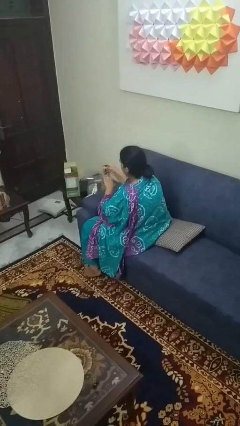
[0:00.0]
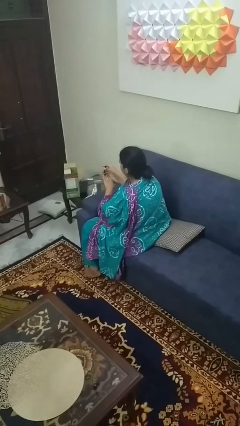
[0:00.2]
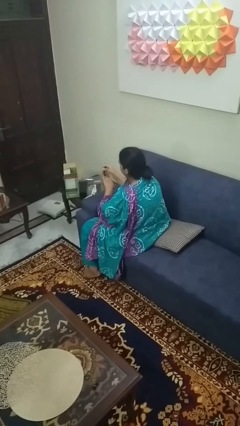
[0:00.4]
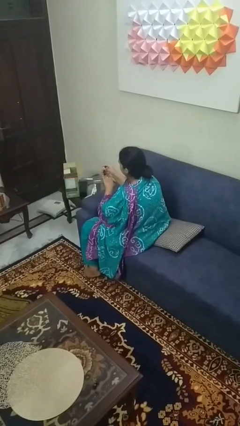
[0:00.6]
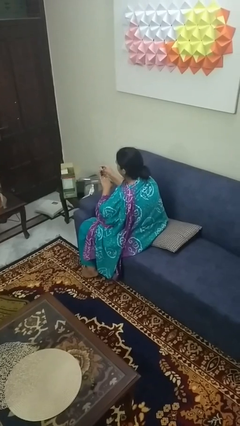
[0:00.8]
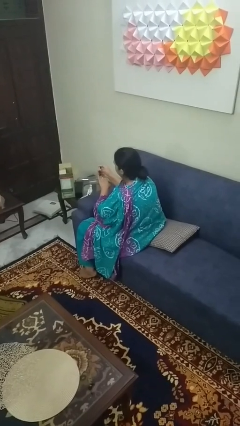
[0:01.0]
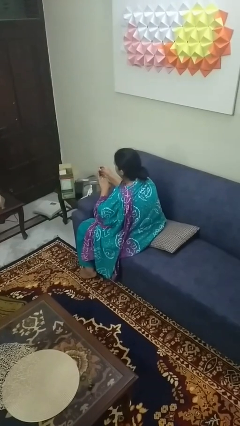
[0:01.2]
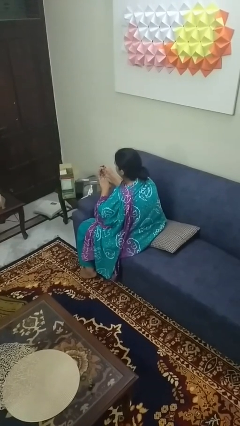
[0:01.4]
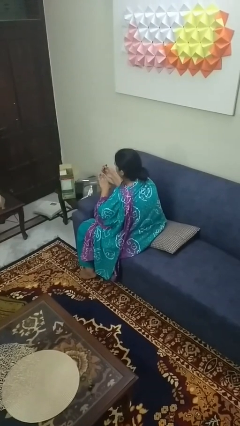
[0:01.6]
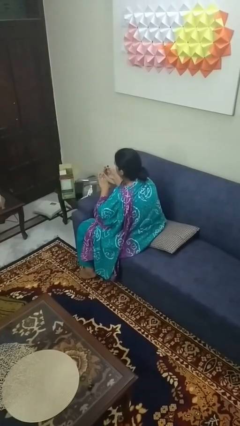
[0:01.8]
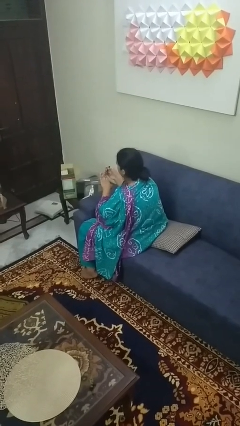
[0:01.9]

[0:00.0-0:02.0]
person clips fingernails

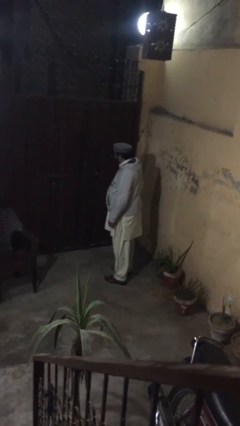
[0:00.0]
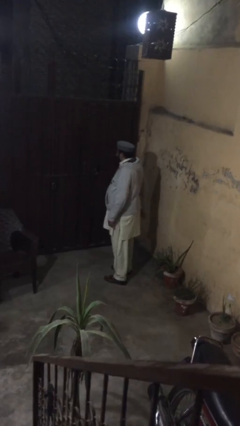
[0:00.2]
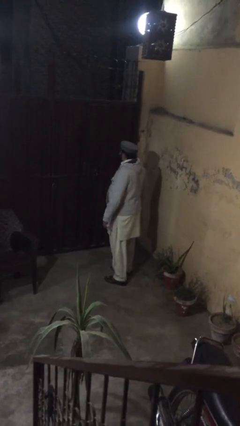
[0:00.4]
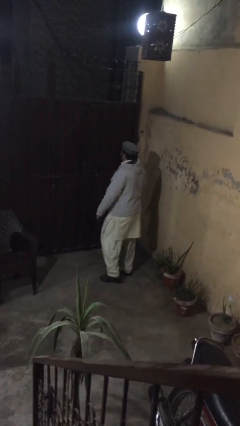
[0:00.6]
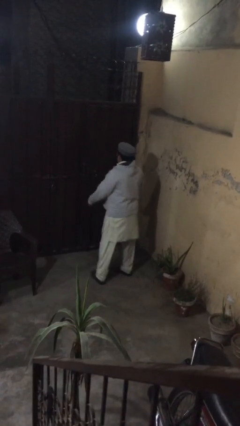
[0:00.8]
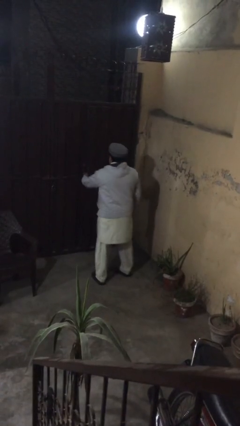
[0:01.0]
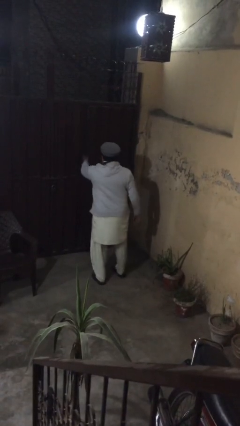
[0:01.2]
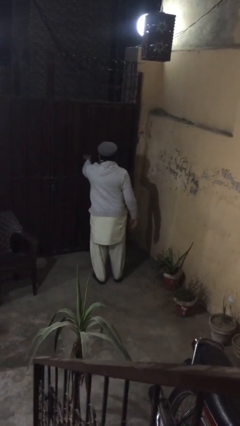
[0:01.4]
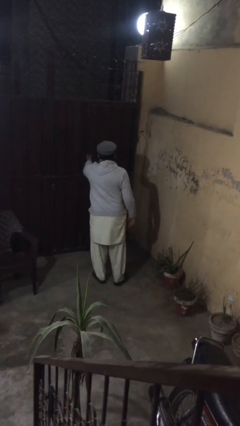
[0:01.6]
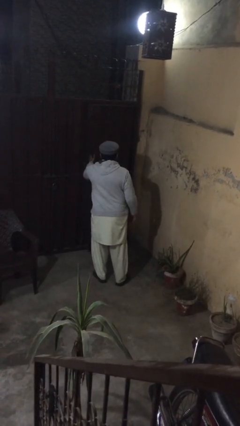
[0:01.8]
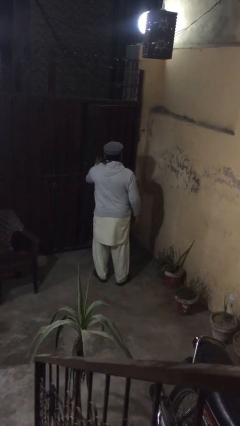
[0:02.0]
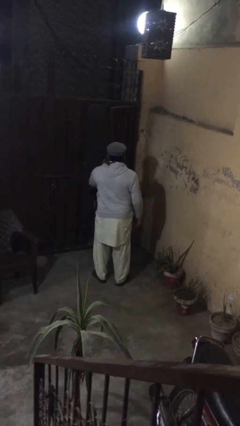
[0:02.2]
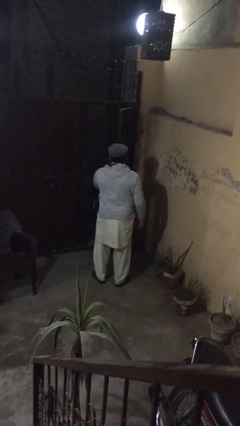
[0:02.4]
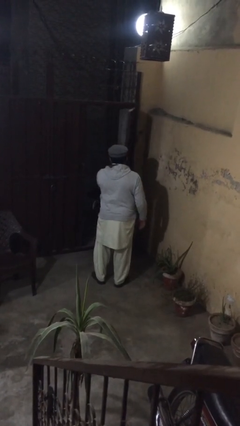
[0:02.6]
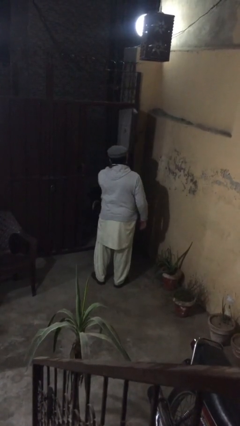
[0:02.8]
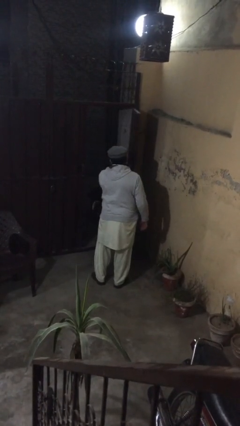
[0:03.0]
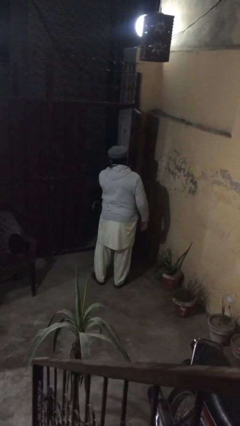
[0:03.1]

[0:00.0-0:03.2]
person opens facility door

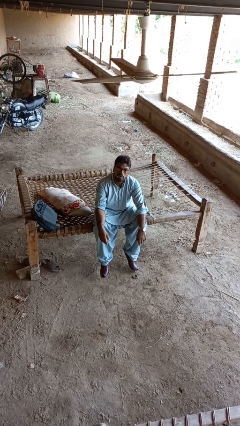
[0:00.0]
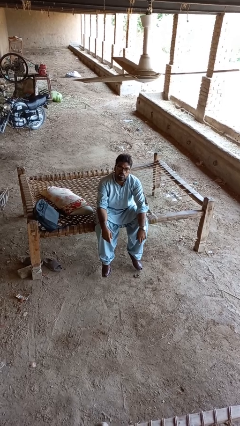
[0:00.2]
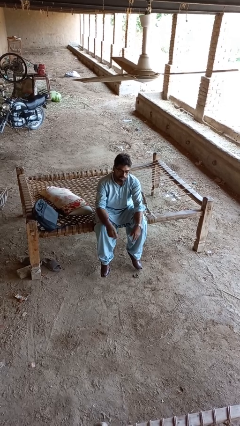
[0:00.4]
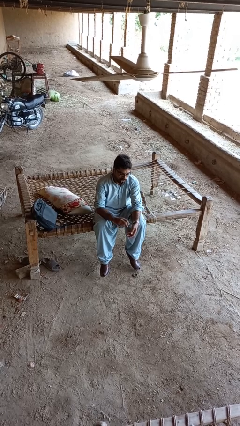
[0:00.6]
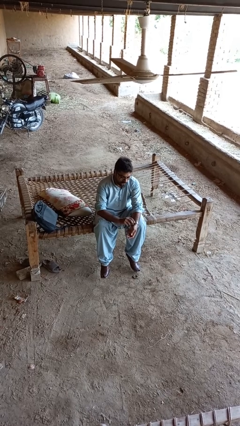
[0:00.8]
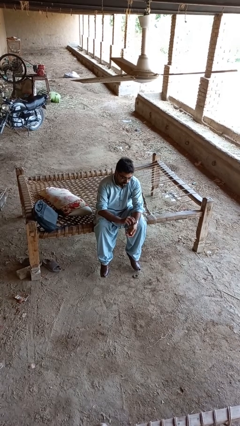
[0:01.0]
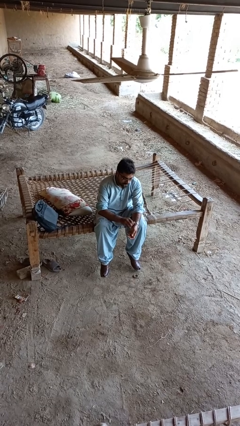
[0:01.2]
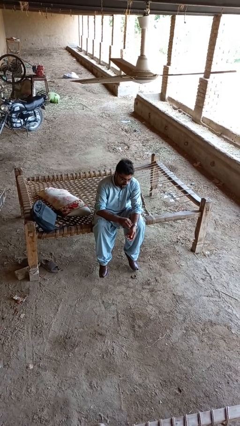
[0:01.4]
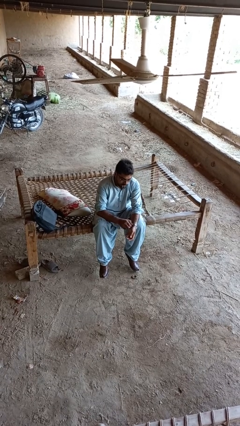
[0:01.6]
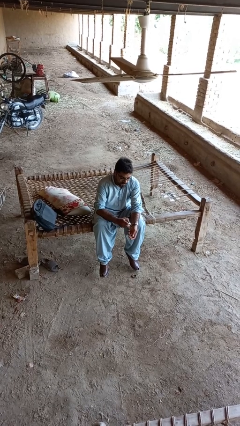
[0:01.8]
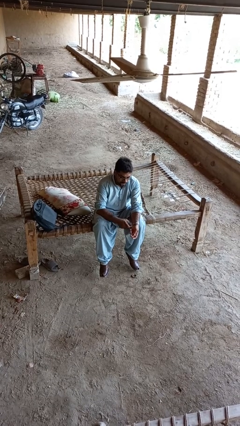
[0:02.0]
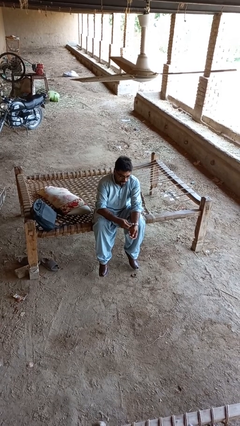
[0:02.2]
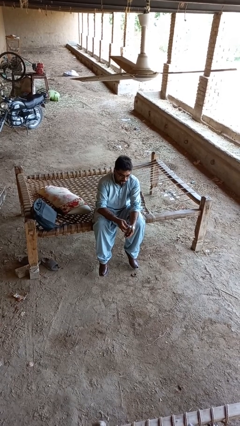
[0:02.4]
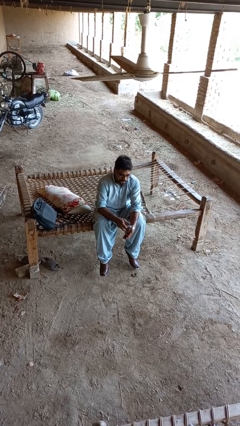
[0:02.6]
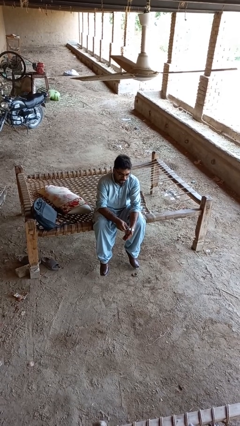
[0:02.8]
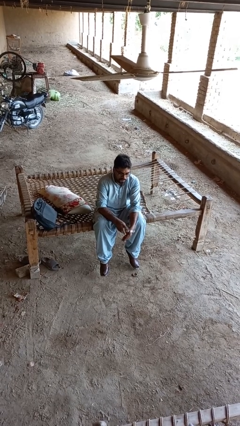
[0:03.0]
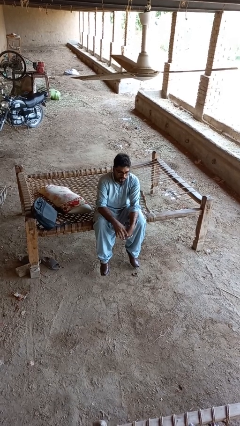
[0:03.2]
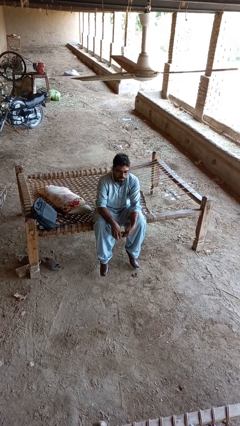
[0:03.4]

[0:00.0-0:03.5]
person takes off wristwatch

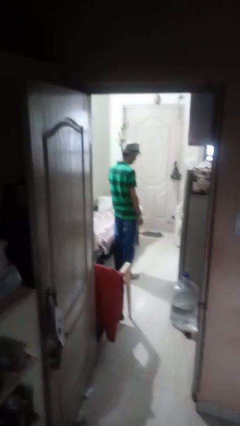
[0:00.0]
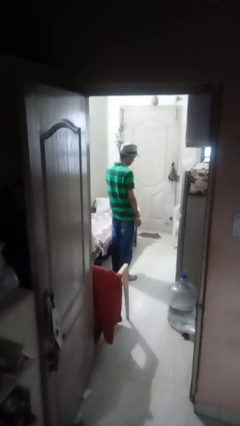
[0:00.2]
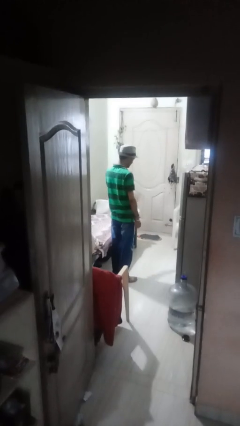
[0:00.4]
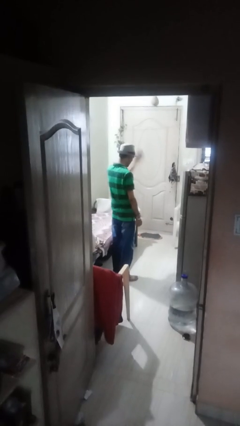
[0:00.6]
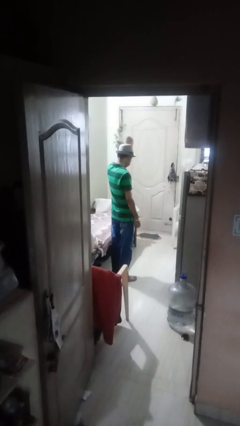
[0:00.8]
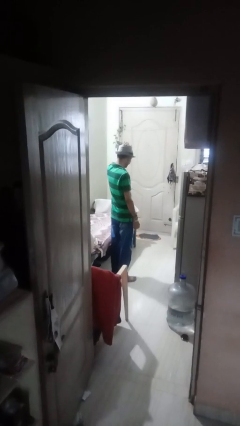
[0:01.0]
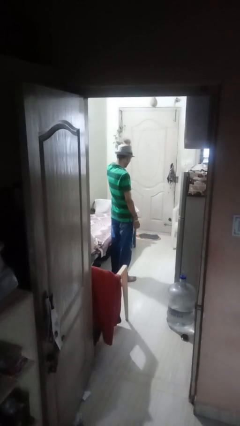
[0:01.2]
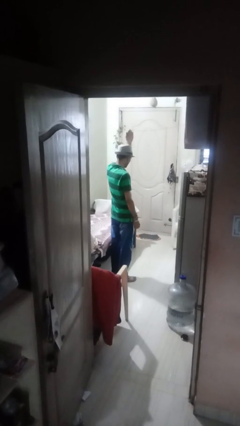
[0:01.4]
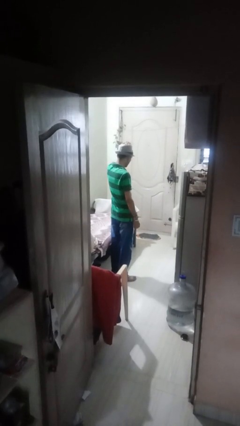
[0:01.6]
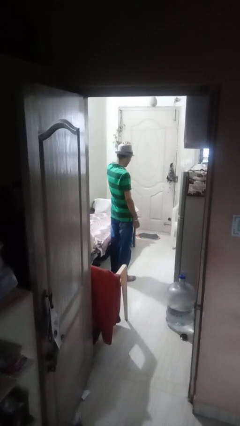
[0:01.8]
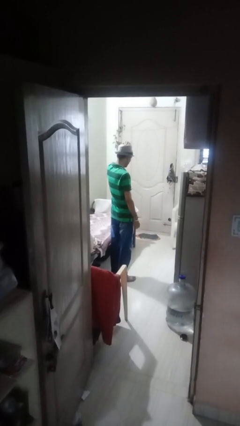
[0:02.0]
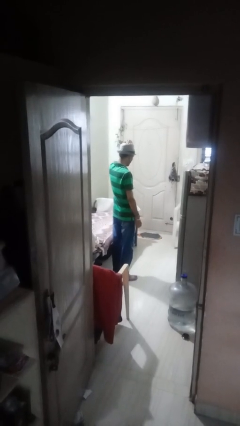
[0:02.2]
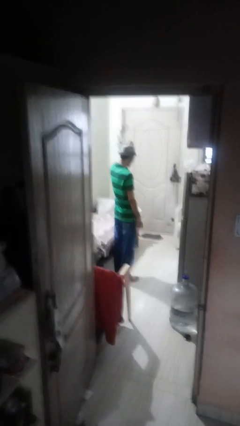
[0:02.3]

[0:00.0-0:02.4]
person pats head

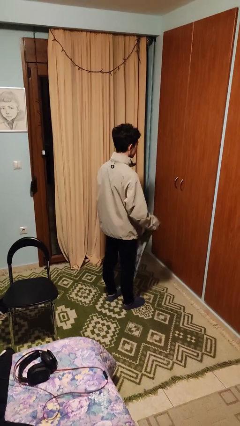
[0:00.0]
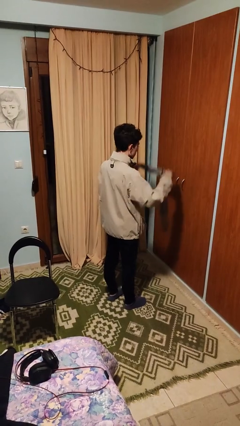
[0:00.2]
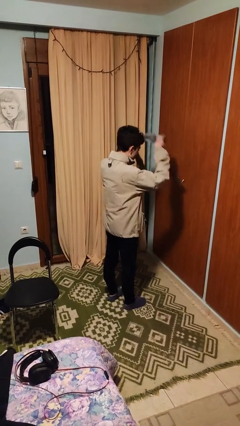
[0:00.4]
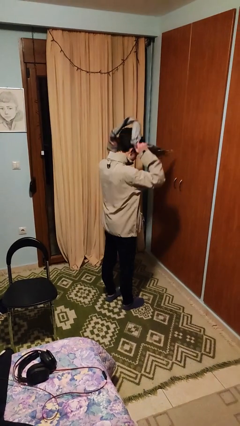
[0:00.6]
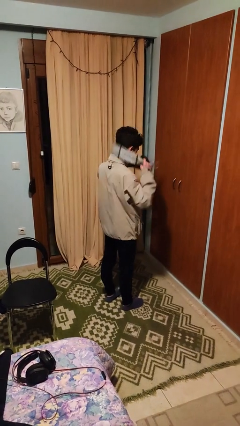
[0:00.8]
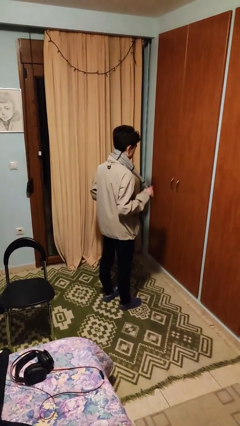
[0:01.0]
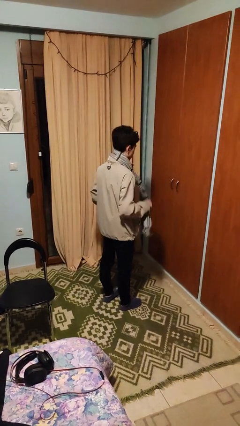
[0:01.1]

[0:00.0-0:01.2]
person puts on scarf

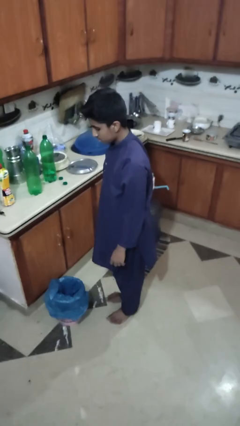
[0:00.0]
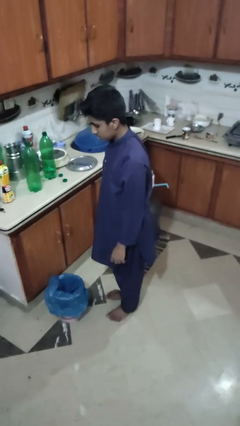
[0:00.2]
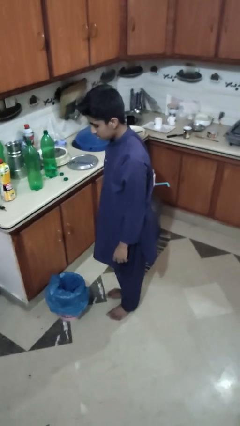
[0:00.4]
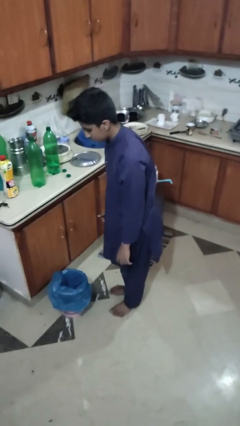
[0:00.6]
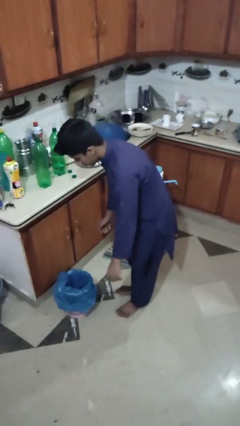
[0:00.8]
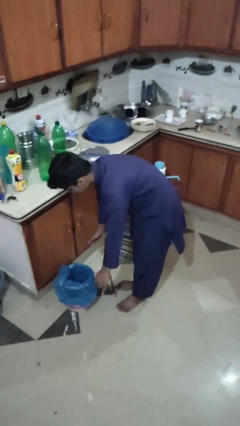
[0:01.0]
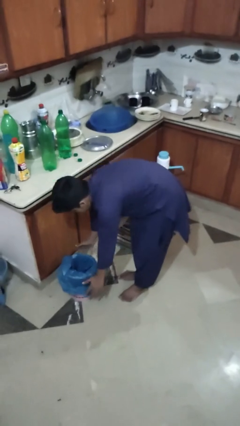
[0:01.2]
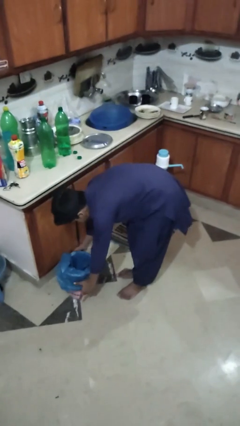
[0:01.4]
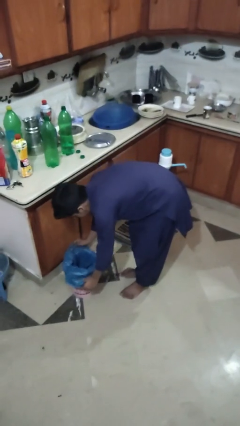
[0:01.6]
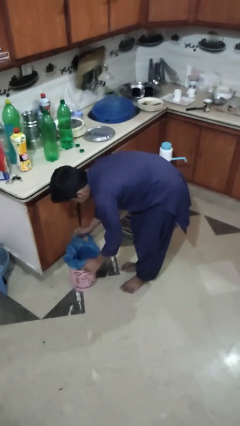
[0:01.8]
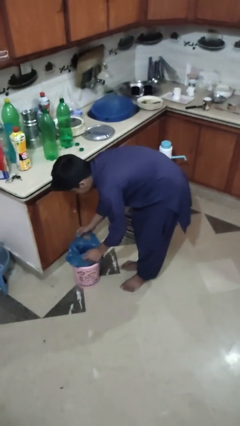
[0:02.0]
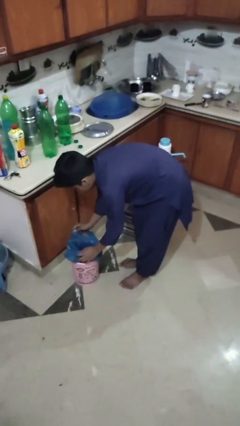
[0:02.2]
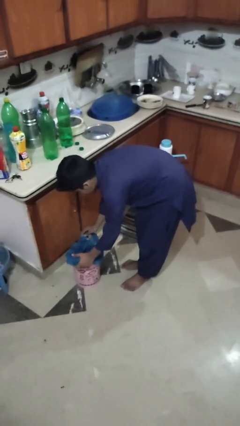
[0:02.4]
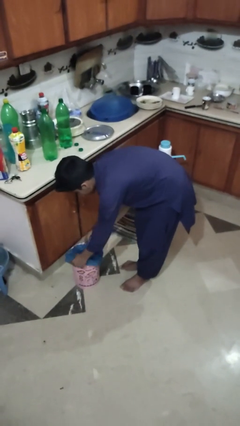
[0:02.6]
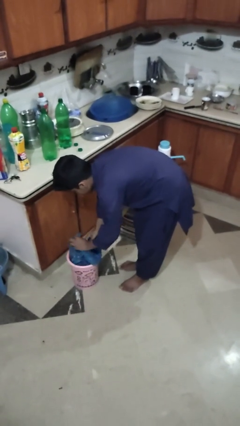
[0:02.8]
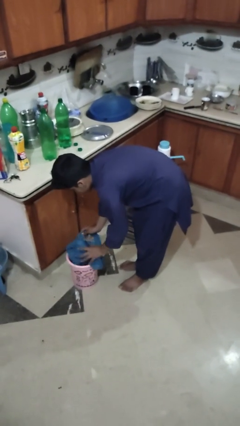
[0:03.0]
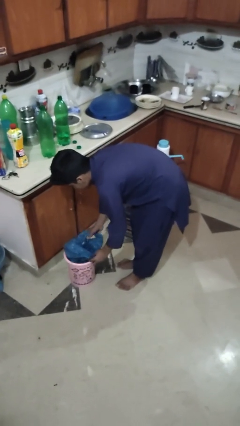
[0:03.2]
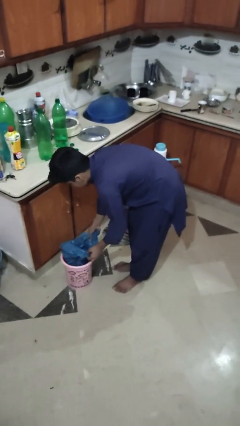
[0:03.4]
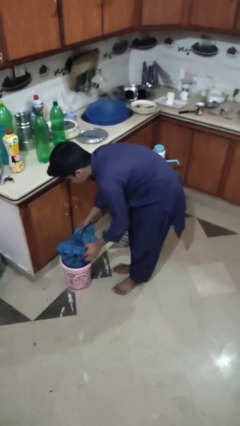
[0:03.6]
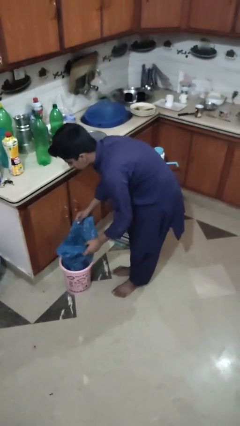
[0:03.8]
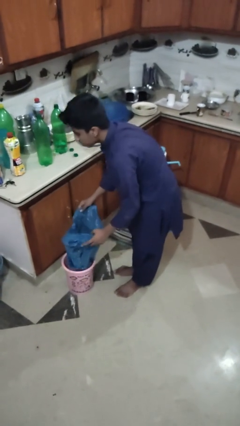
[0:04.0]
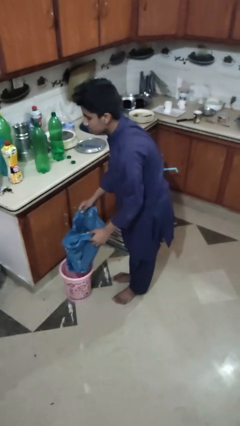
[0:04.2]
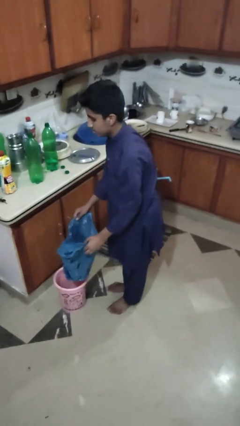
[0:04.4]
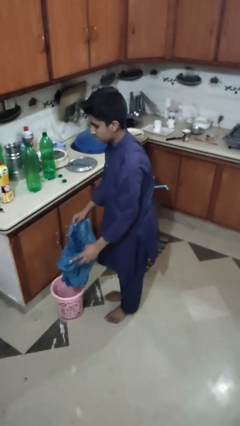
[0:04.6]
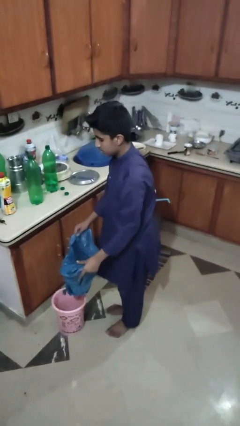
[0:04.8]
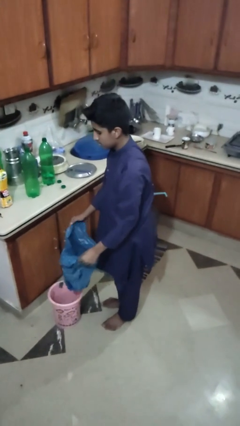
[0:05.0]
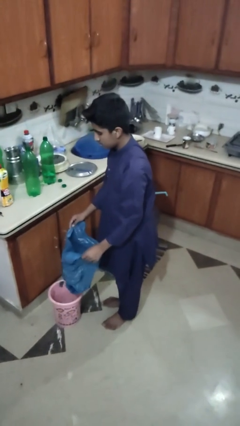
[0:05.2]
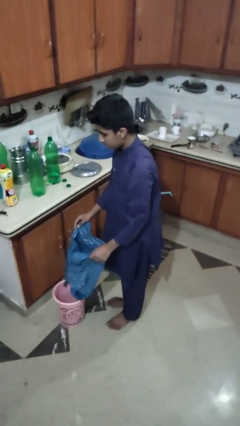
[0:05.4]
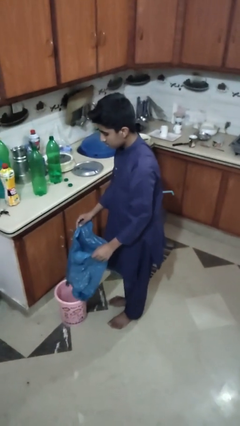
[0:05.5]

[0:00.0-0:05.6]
person removes trashbag from trashcan
